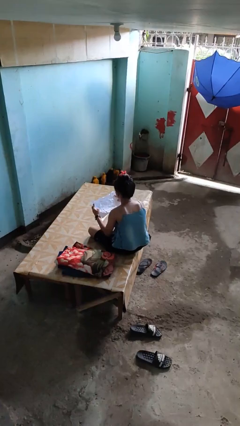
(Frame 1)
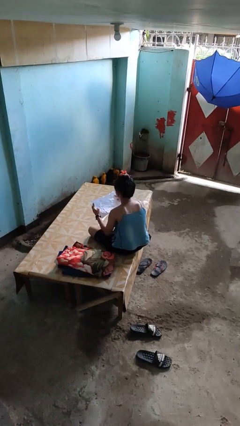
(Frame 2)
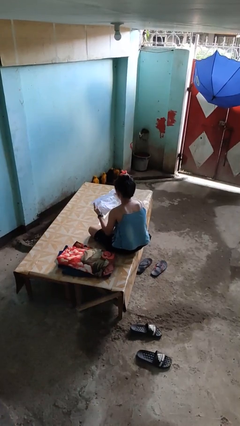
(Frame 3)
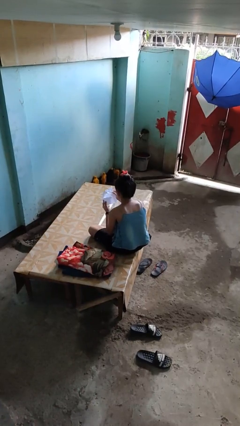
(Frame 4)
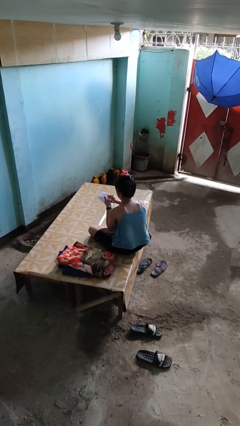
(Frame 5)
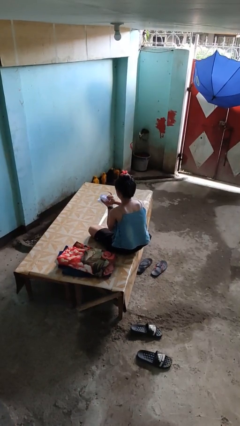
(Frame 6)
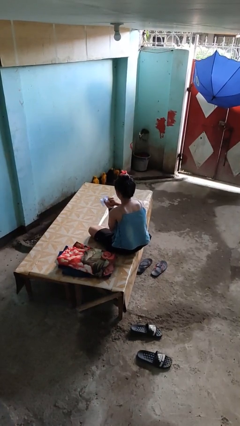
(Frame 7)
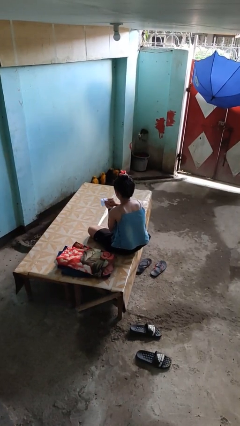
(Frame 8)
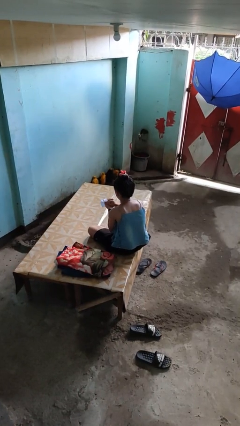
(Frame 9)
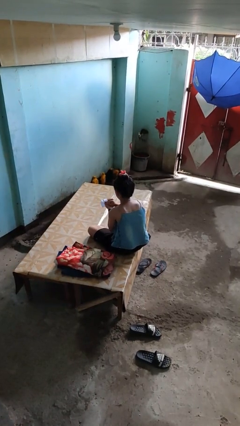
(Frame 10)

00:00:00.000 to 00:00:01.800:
person crumples paper

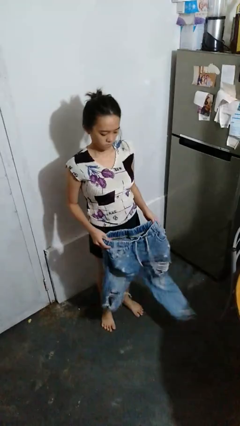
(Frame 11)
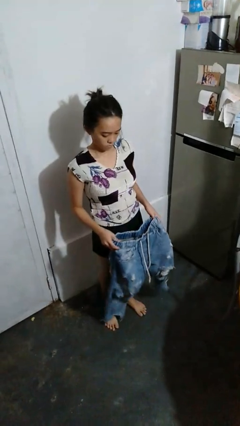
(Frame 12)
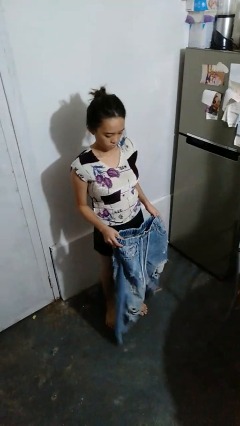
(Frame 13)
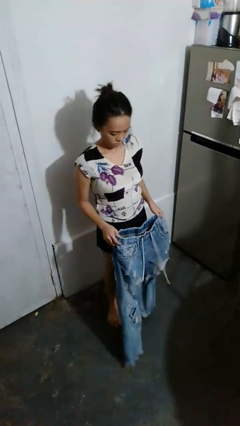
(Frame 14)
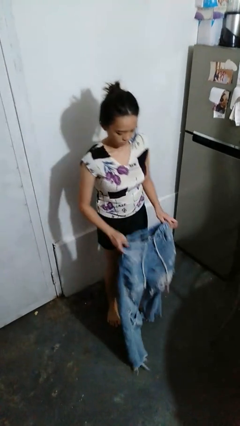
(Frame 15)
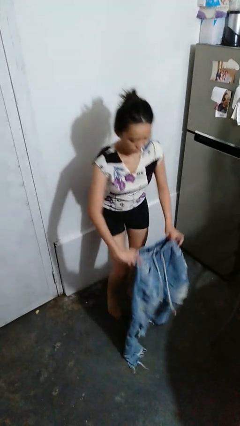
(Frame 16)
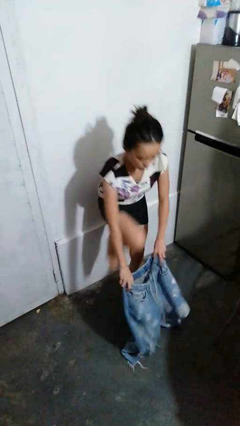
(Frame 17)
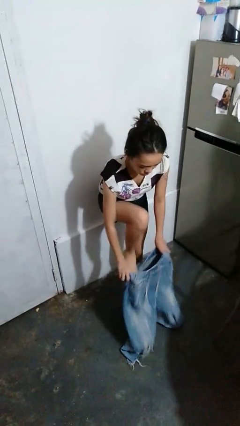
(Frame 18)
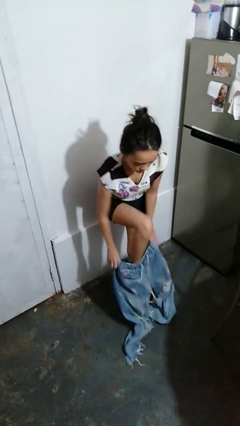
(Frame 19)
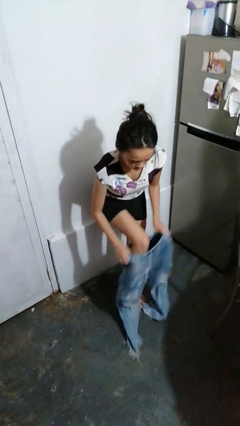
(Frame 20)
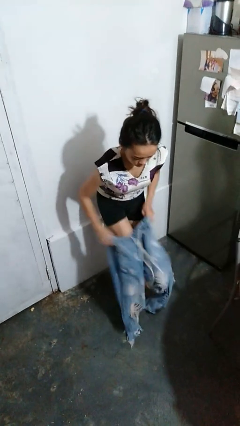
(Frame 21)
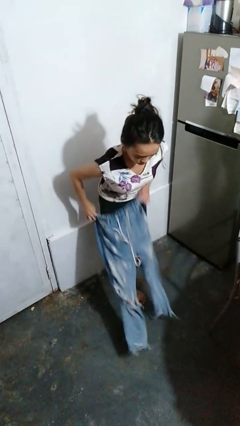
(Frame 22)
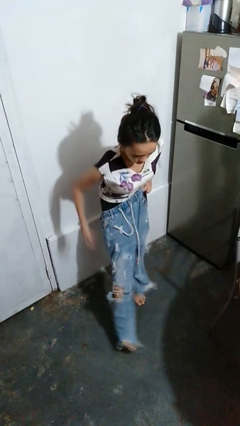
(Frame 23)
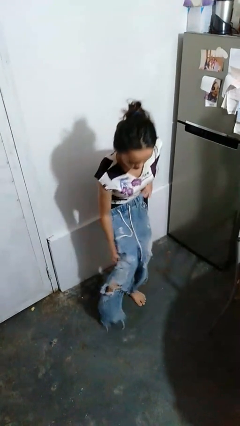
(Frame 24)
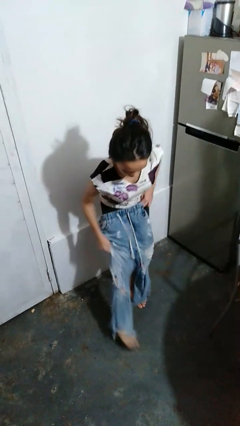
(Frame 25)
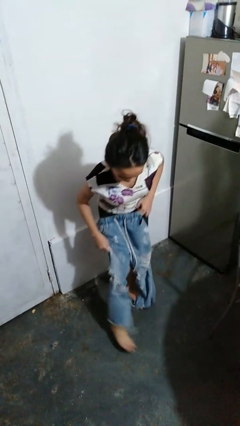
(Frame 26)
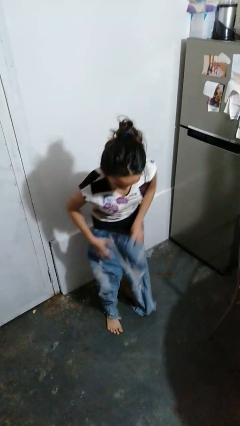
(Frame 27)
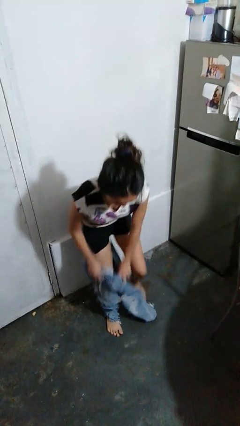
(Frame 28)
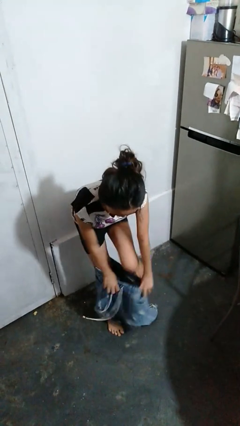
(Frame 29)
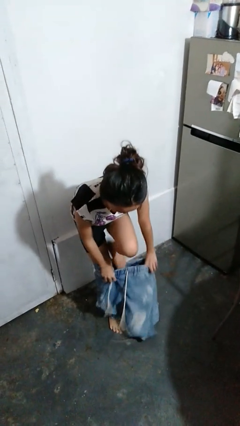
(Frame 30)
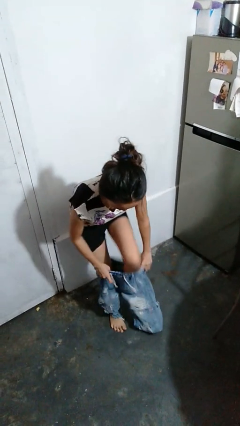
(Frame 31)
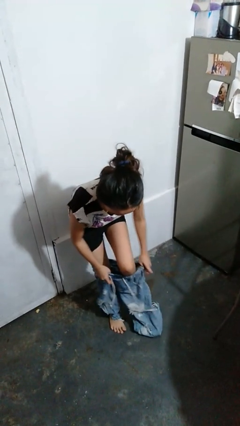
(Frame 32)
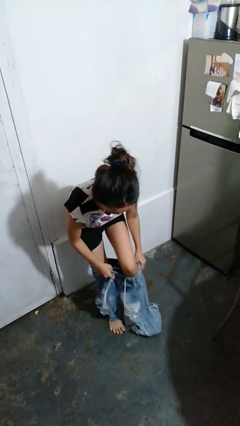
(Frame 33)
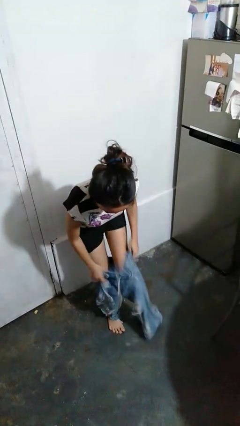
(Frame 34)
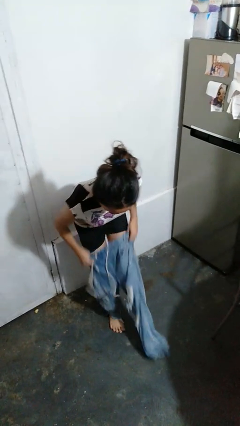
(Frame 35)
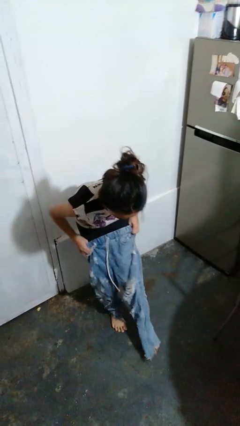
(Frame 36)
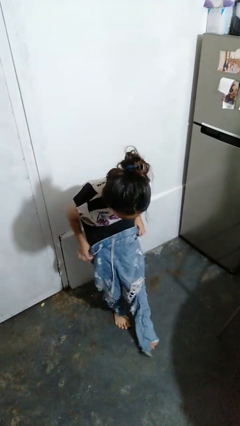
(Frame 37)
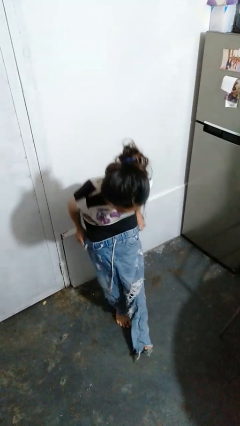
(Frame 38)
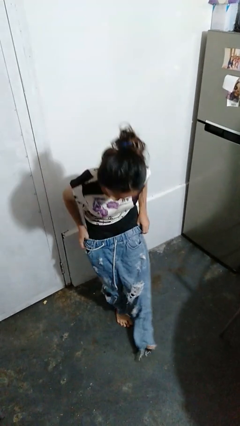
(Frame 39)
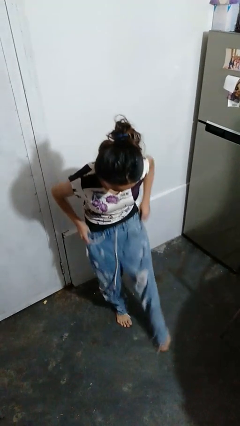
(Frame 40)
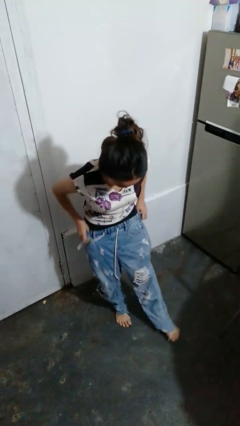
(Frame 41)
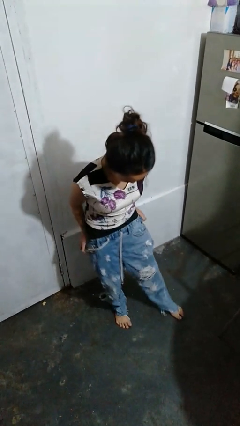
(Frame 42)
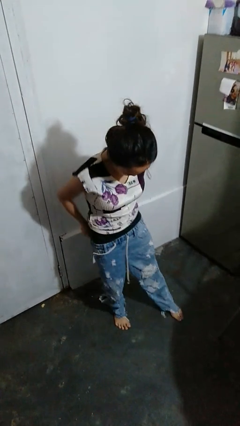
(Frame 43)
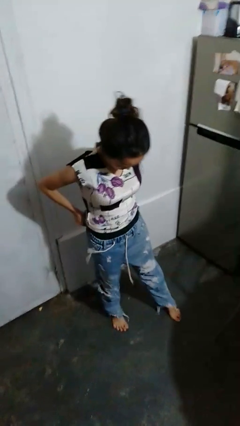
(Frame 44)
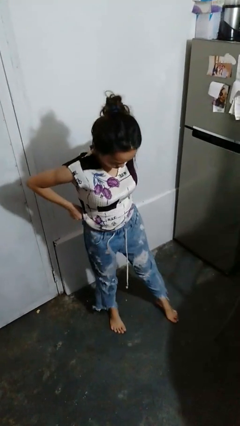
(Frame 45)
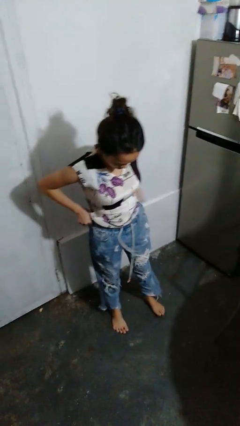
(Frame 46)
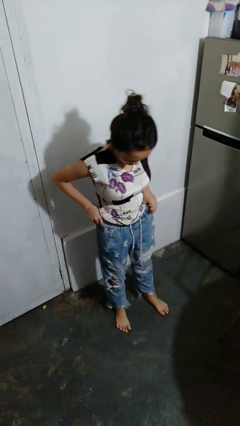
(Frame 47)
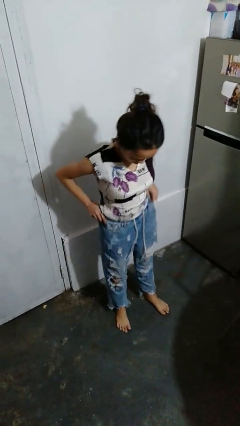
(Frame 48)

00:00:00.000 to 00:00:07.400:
person puts on pants

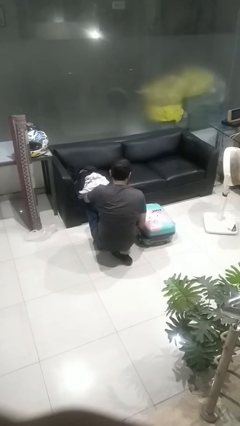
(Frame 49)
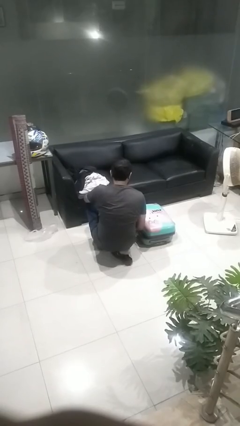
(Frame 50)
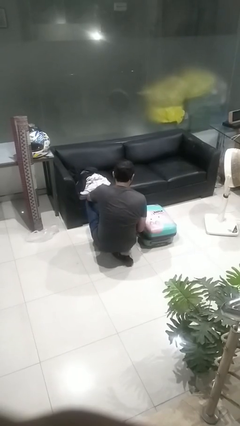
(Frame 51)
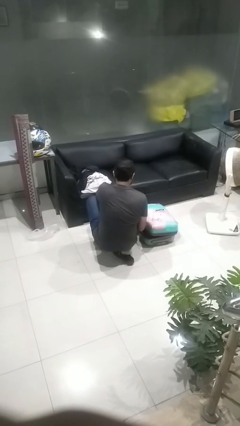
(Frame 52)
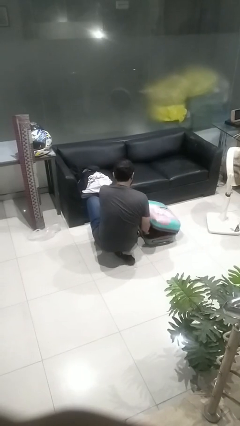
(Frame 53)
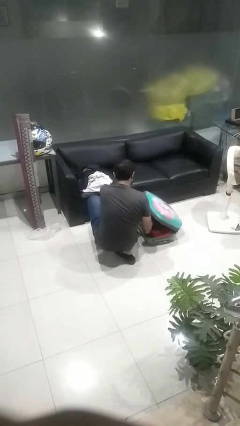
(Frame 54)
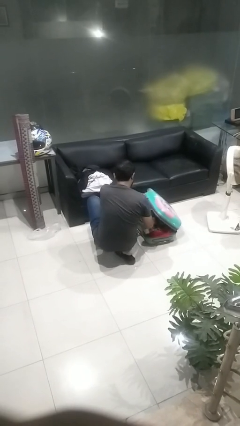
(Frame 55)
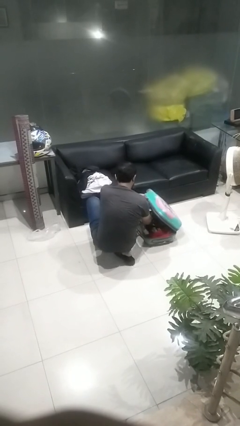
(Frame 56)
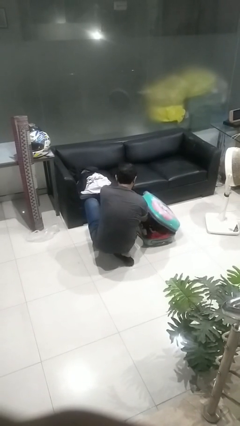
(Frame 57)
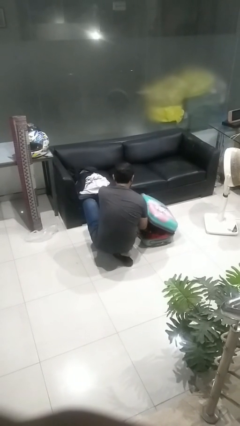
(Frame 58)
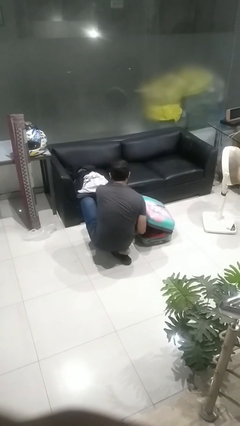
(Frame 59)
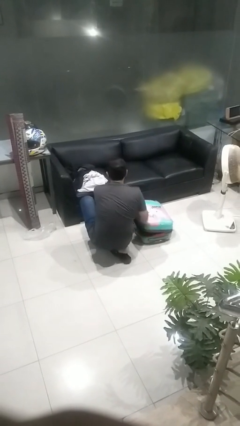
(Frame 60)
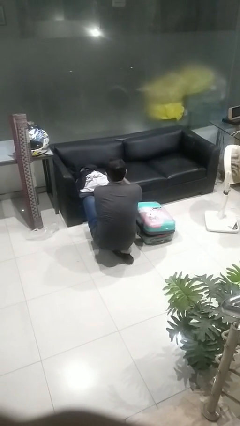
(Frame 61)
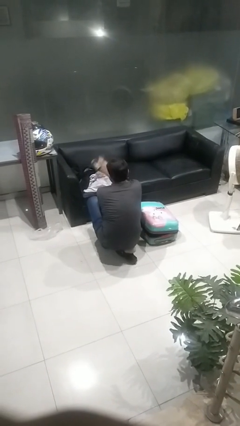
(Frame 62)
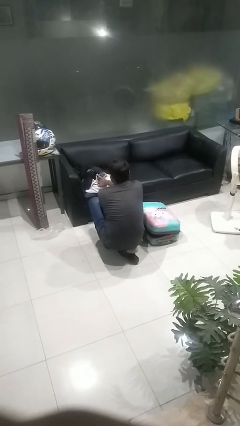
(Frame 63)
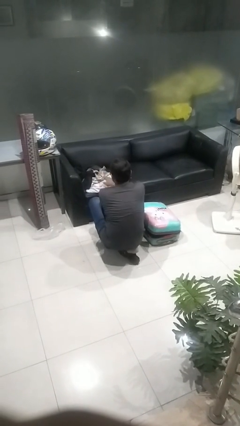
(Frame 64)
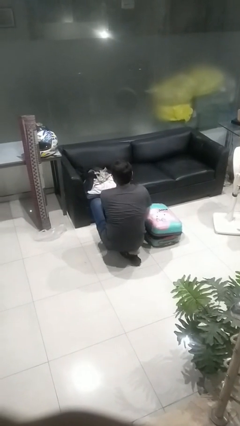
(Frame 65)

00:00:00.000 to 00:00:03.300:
person unloads clothes from suitcase

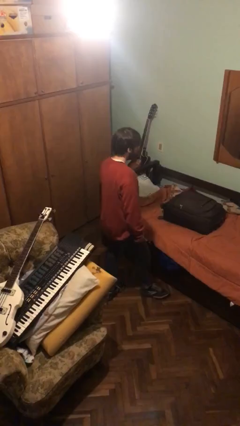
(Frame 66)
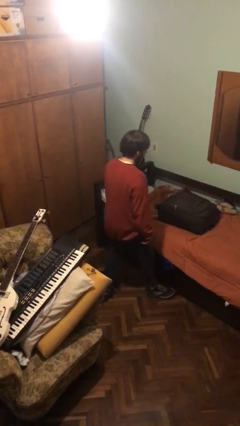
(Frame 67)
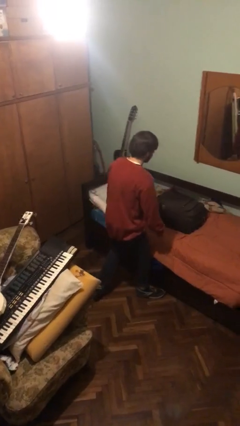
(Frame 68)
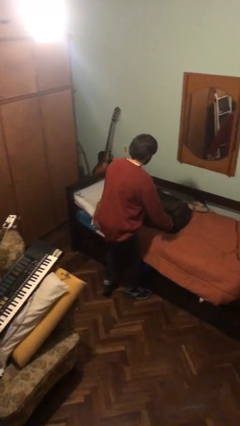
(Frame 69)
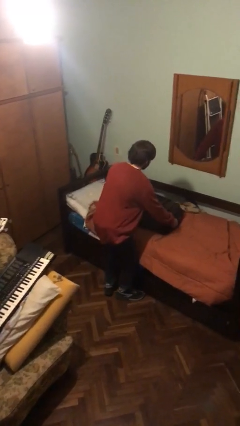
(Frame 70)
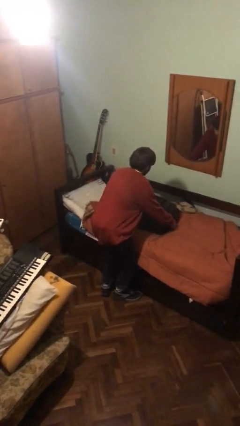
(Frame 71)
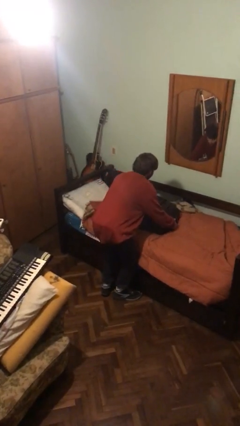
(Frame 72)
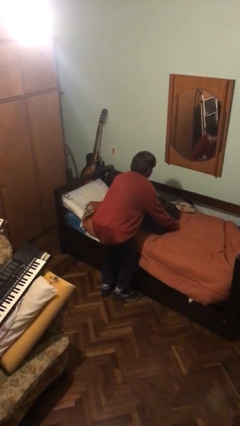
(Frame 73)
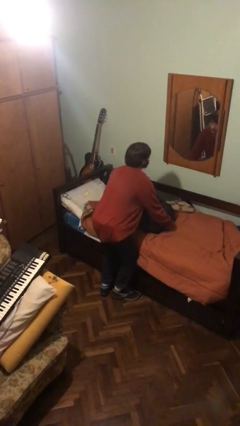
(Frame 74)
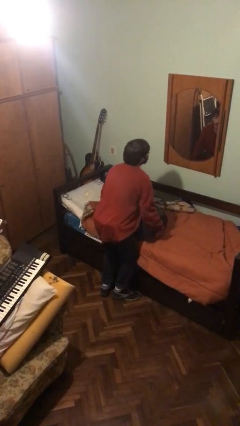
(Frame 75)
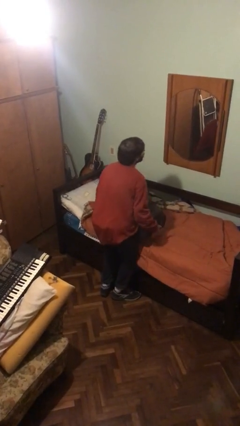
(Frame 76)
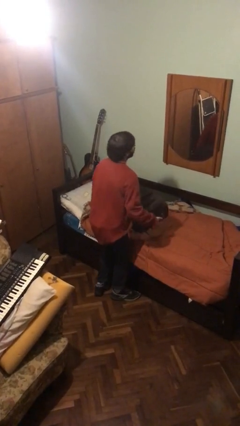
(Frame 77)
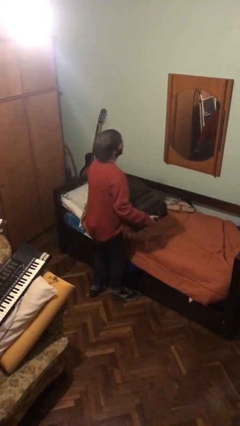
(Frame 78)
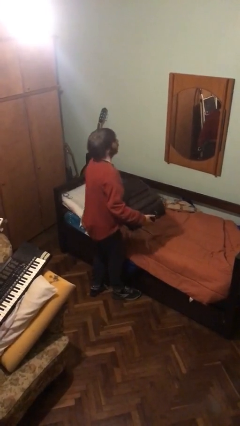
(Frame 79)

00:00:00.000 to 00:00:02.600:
person picks up object from bed

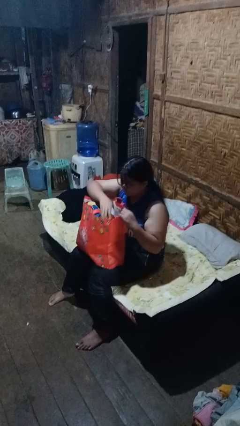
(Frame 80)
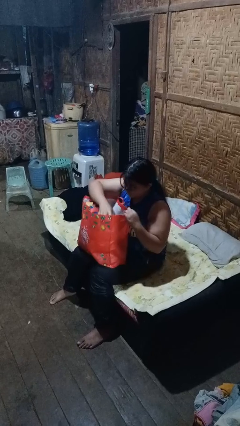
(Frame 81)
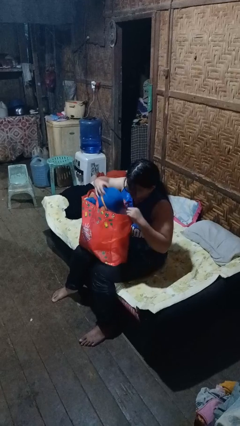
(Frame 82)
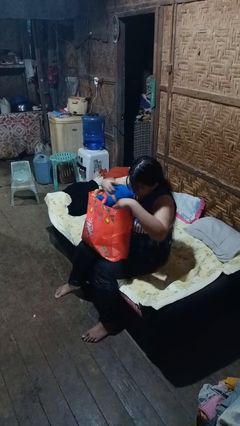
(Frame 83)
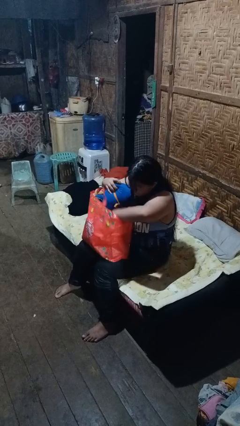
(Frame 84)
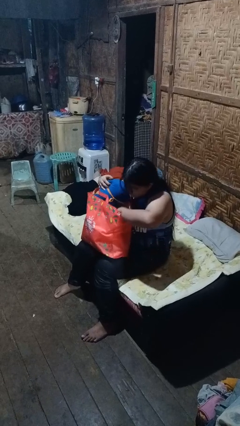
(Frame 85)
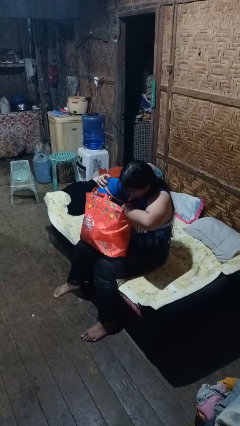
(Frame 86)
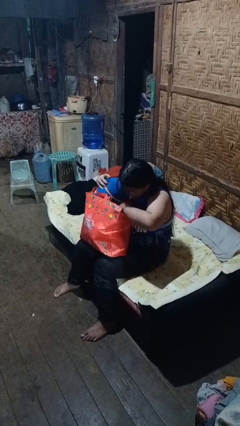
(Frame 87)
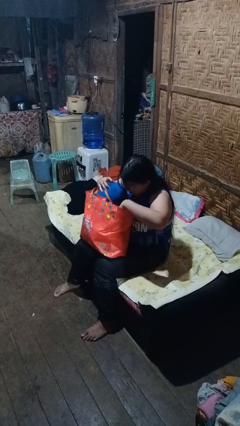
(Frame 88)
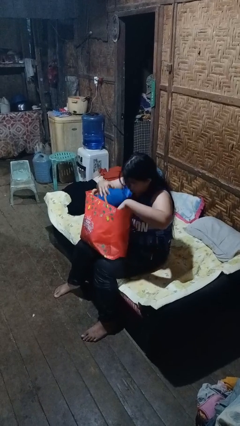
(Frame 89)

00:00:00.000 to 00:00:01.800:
person searches in bag

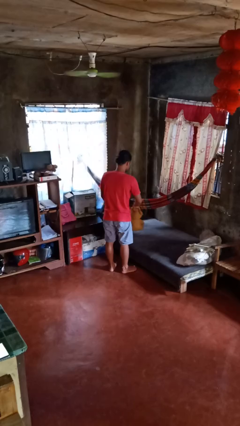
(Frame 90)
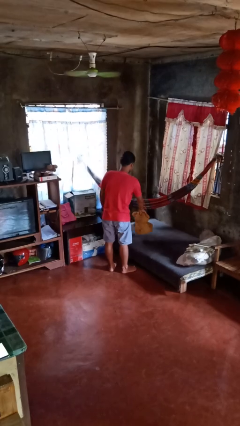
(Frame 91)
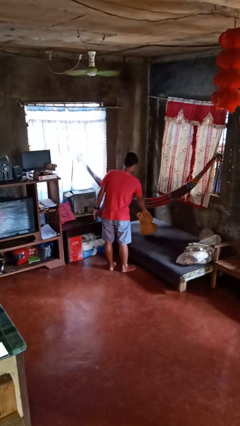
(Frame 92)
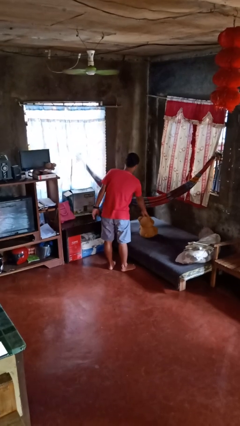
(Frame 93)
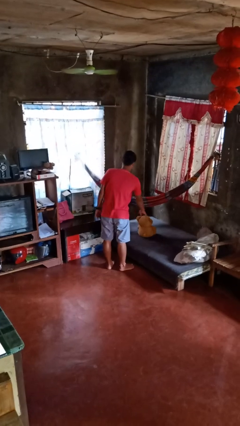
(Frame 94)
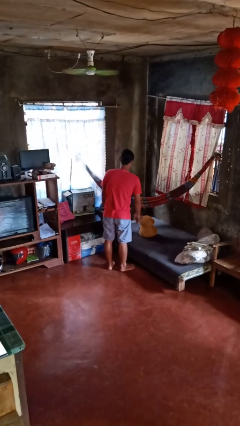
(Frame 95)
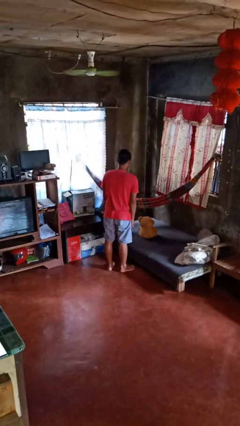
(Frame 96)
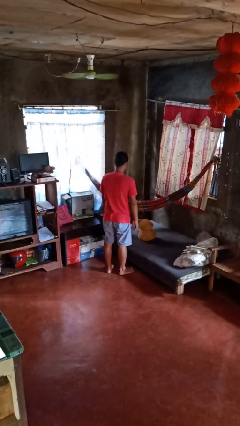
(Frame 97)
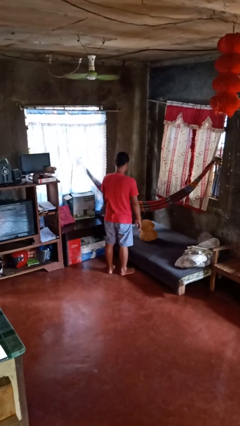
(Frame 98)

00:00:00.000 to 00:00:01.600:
person puts down object on bed
